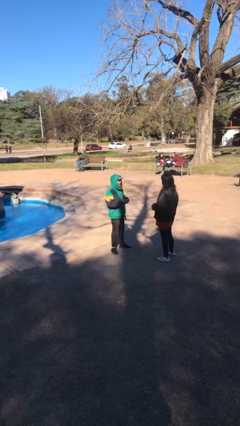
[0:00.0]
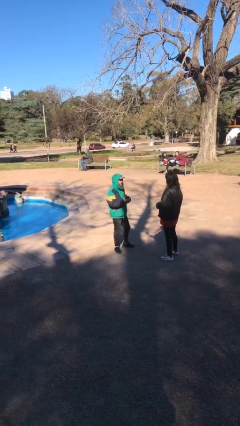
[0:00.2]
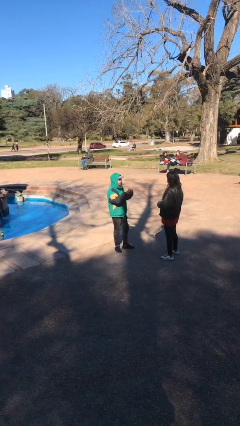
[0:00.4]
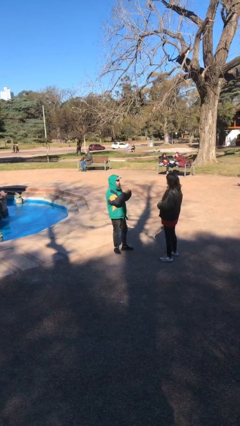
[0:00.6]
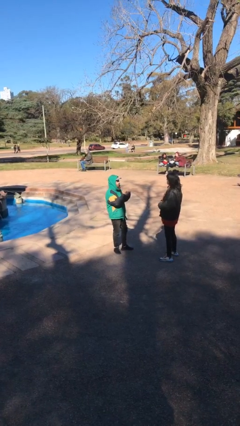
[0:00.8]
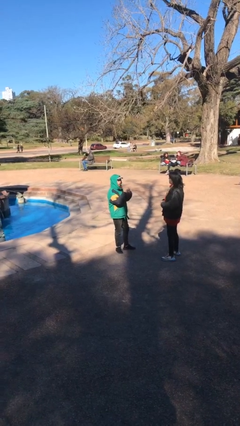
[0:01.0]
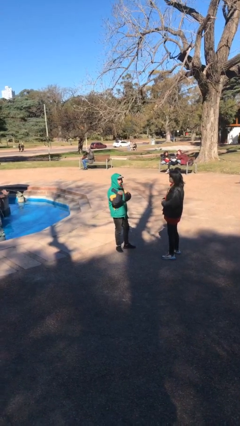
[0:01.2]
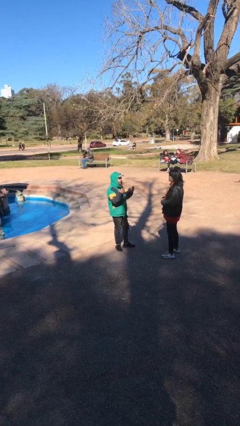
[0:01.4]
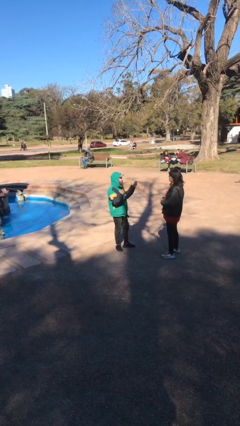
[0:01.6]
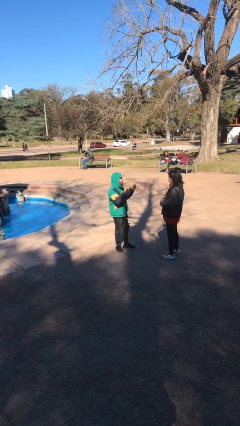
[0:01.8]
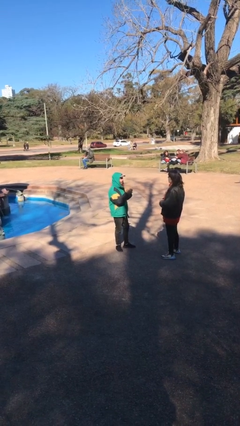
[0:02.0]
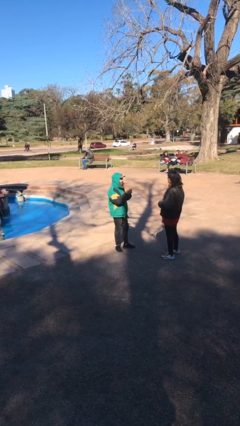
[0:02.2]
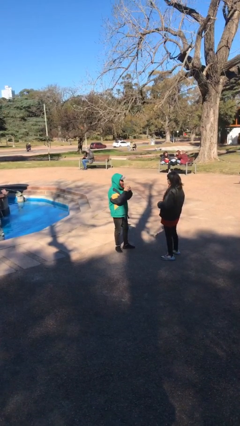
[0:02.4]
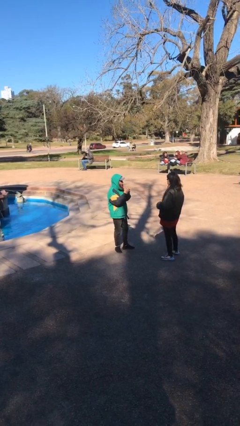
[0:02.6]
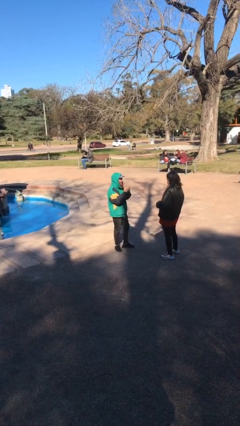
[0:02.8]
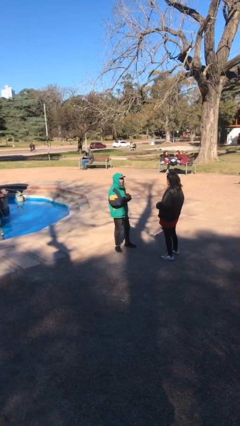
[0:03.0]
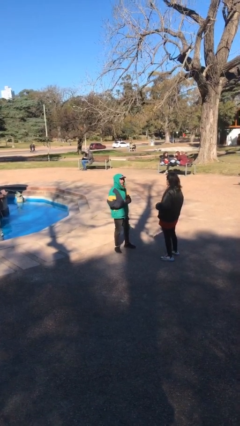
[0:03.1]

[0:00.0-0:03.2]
person talks to person

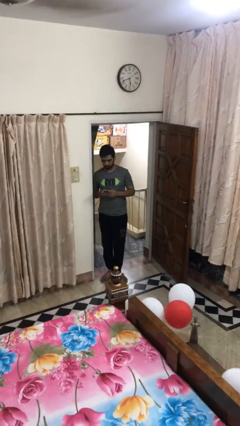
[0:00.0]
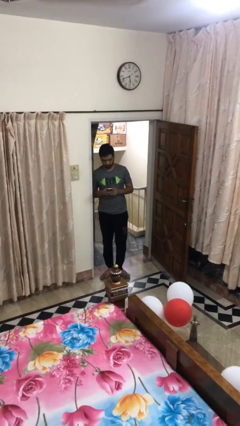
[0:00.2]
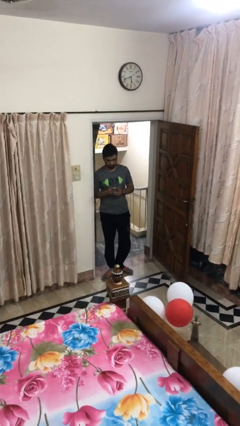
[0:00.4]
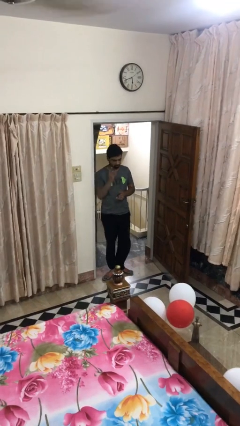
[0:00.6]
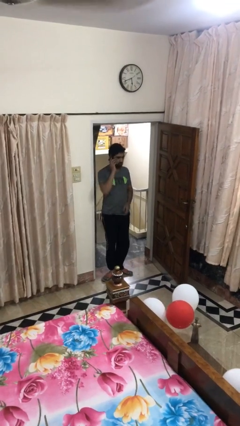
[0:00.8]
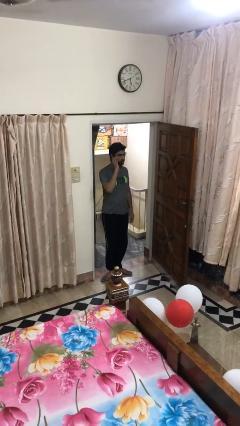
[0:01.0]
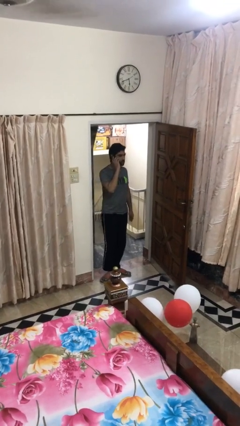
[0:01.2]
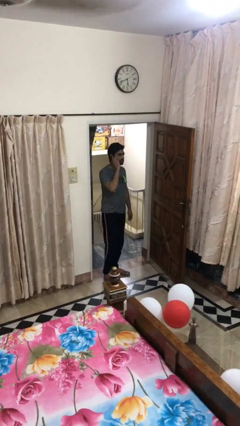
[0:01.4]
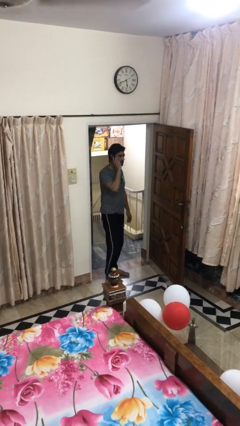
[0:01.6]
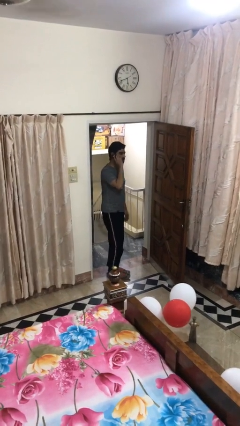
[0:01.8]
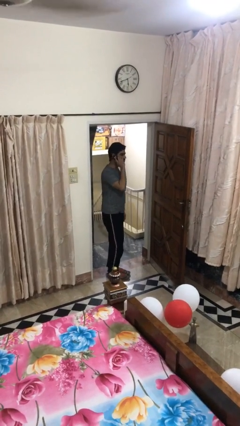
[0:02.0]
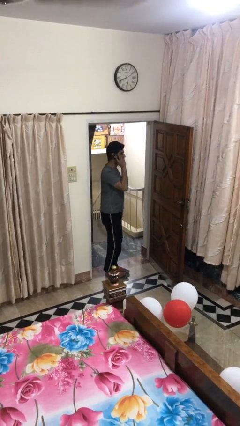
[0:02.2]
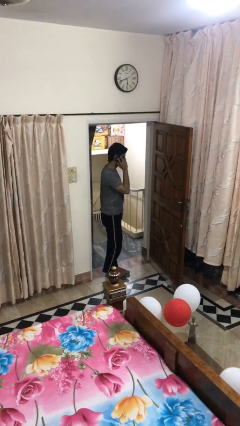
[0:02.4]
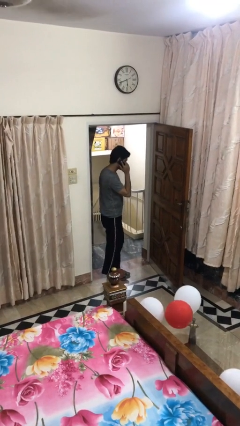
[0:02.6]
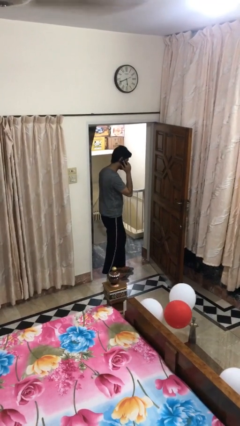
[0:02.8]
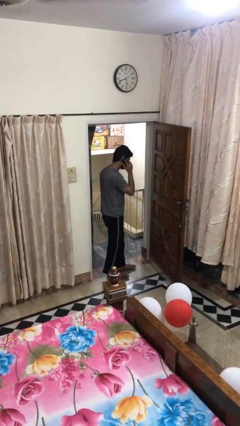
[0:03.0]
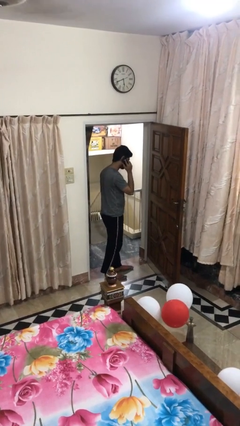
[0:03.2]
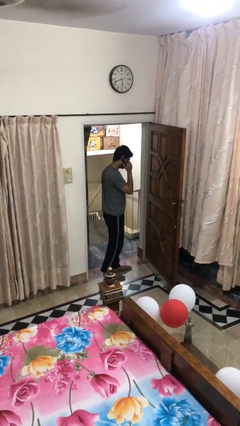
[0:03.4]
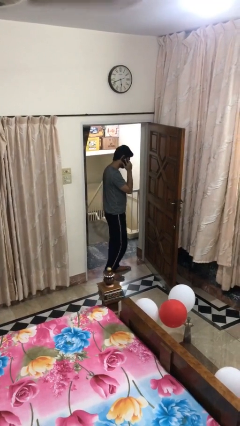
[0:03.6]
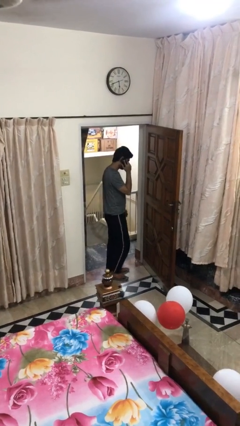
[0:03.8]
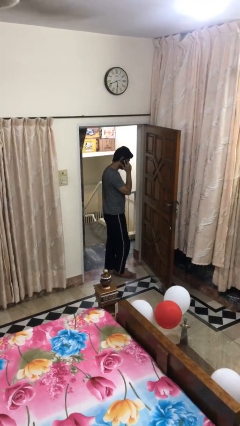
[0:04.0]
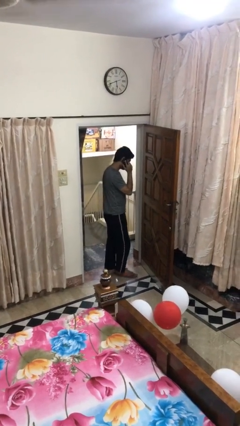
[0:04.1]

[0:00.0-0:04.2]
person talks on phone

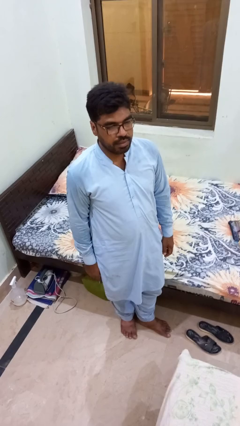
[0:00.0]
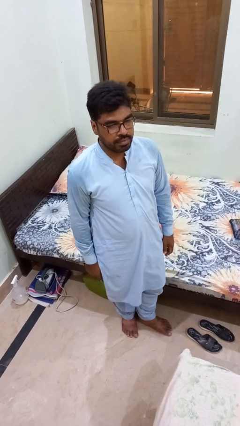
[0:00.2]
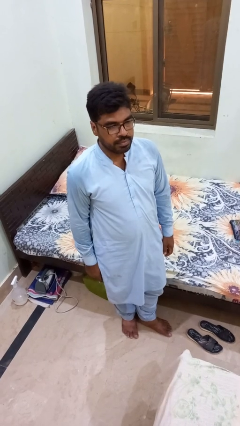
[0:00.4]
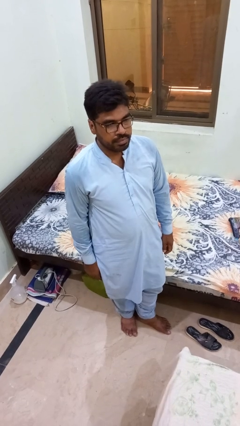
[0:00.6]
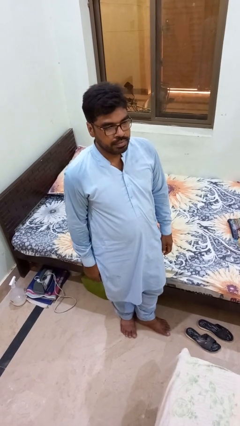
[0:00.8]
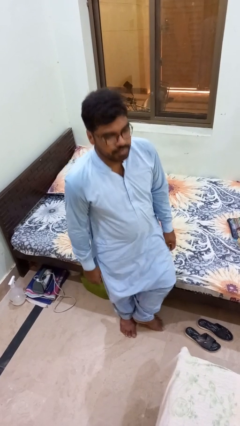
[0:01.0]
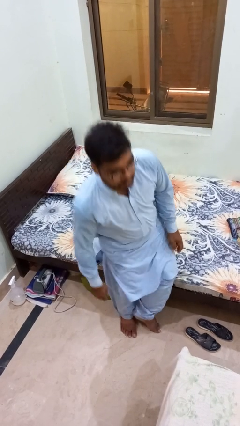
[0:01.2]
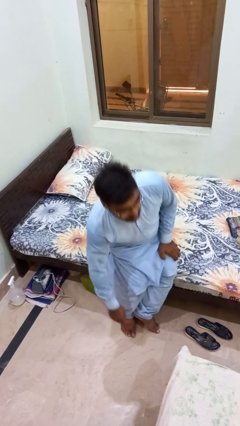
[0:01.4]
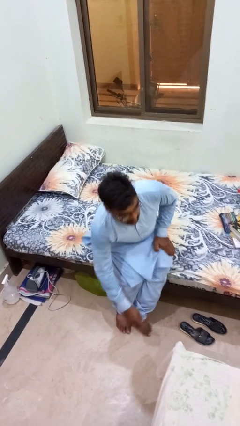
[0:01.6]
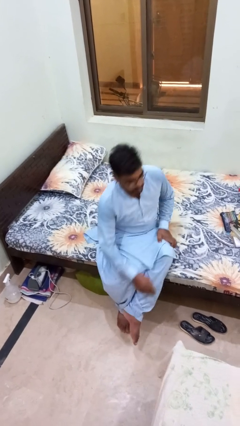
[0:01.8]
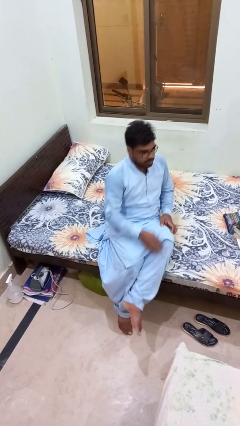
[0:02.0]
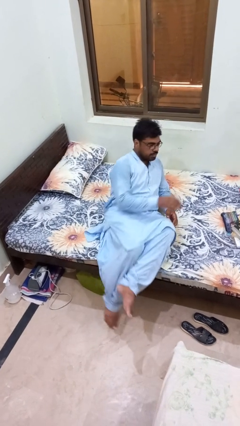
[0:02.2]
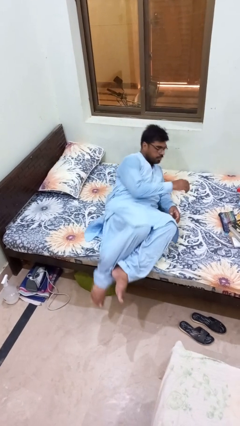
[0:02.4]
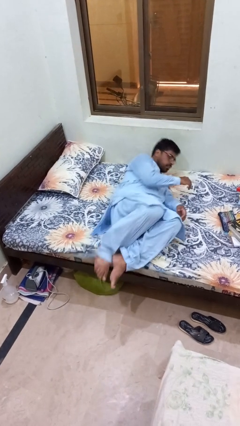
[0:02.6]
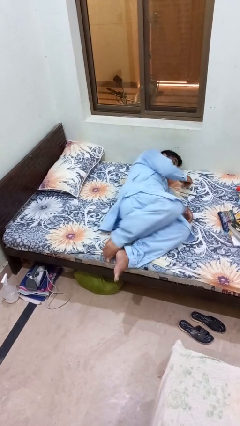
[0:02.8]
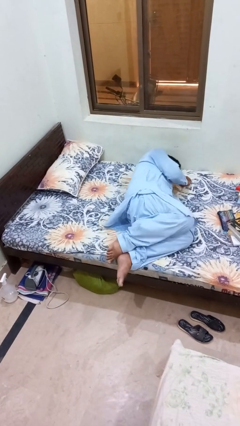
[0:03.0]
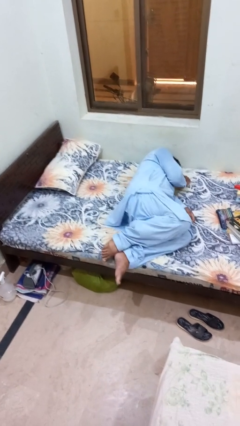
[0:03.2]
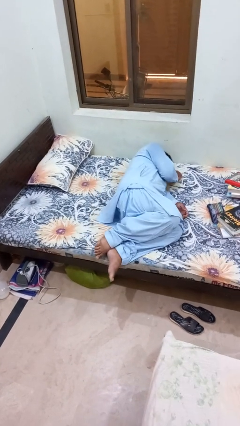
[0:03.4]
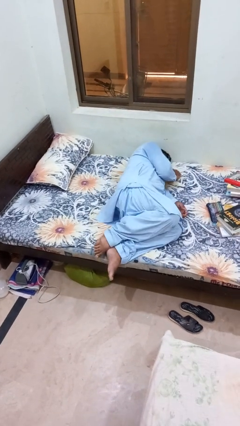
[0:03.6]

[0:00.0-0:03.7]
person lies down on bed

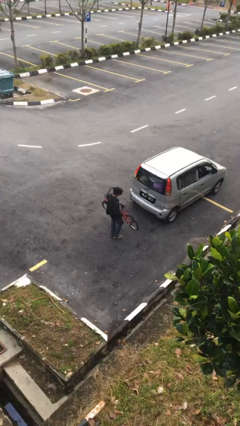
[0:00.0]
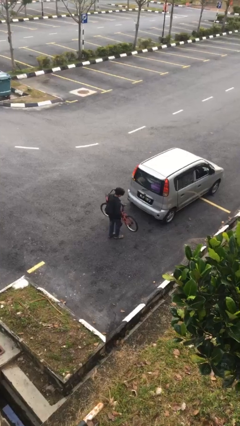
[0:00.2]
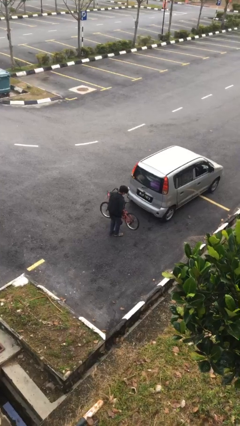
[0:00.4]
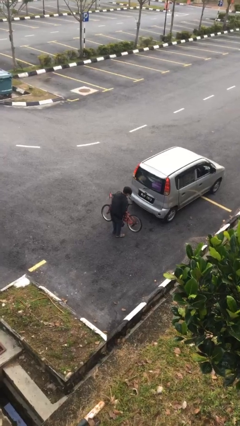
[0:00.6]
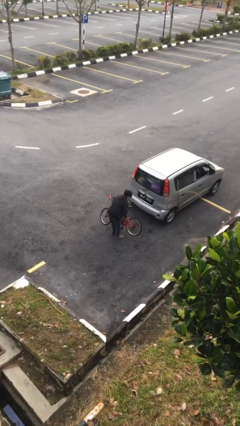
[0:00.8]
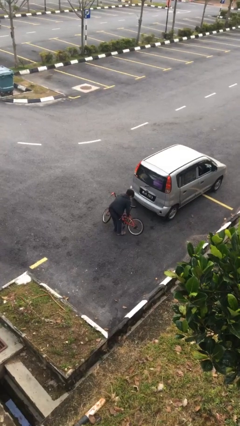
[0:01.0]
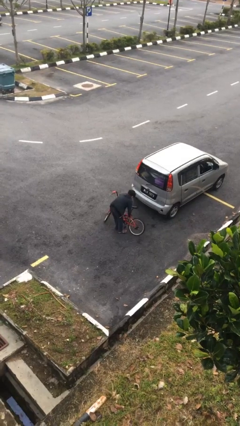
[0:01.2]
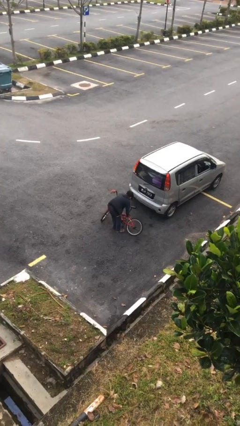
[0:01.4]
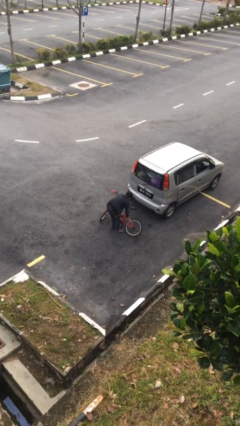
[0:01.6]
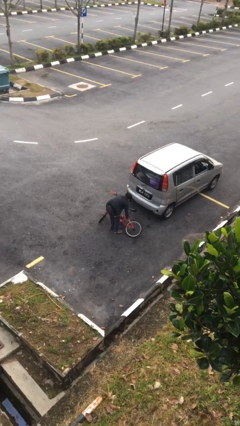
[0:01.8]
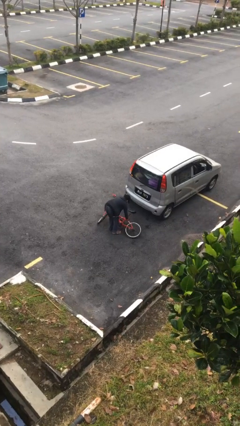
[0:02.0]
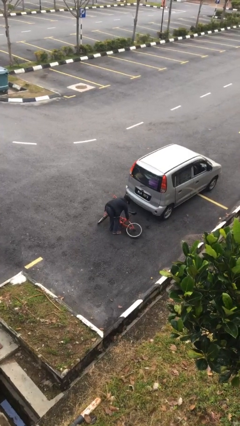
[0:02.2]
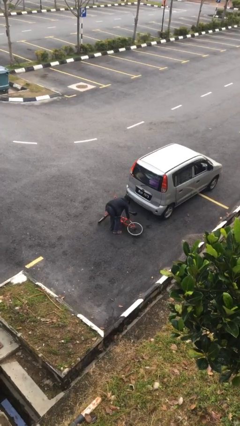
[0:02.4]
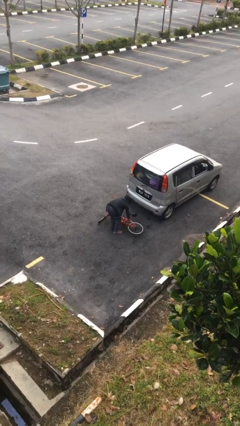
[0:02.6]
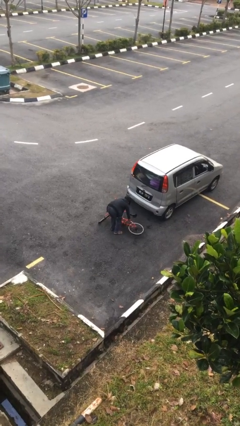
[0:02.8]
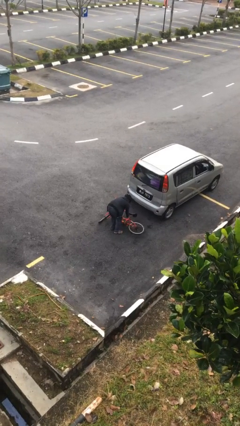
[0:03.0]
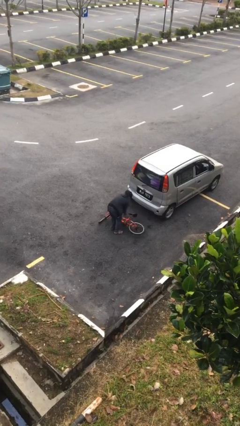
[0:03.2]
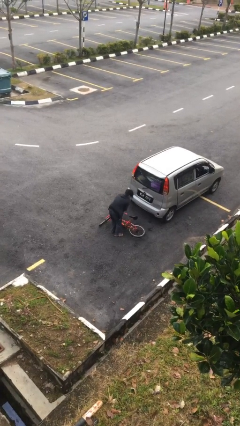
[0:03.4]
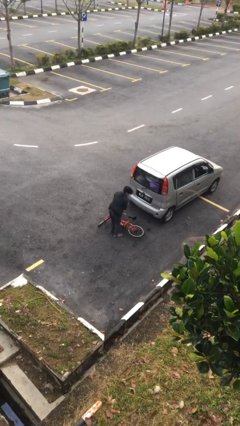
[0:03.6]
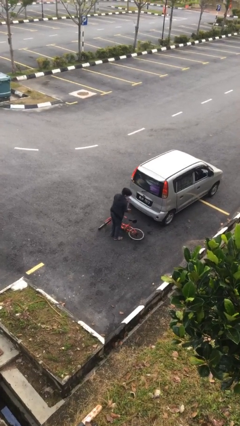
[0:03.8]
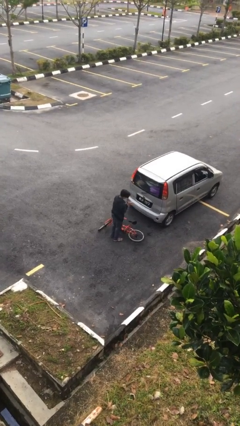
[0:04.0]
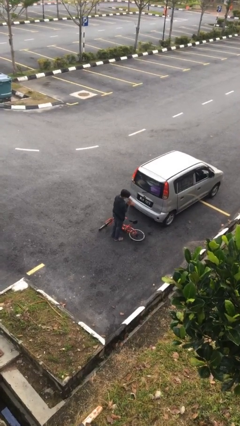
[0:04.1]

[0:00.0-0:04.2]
person puts down object on floor

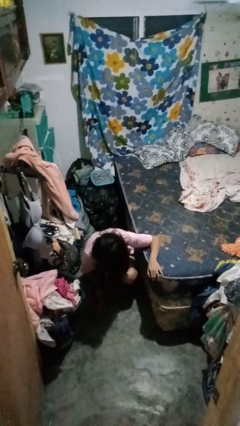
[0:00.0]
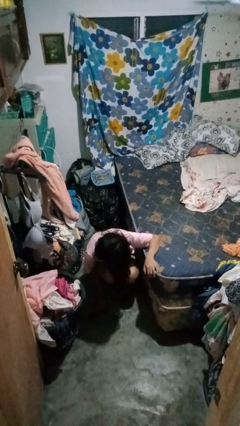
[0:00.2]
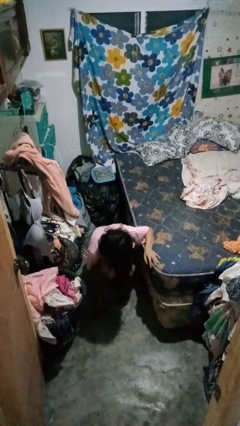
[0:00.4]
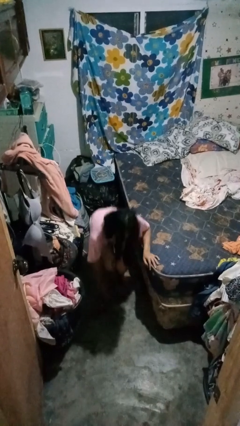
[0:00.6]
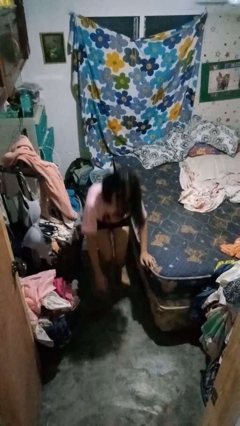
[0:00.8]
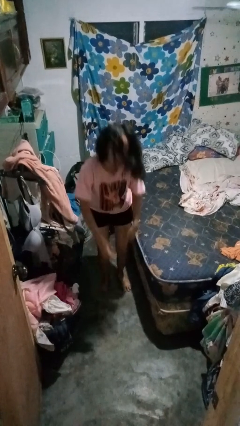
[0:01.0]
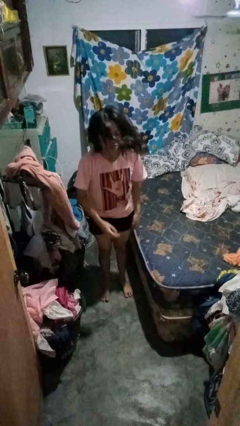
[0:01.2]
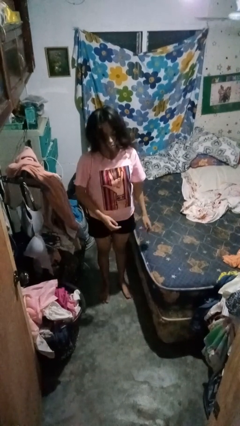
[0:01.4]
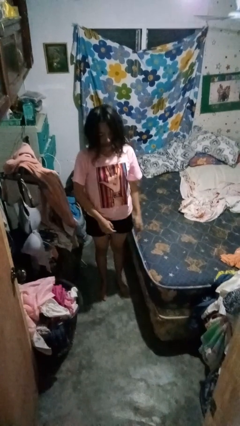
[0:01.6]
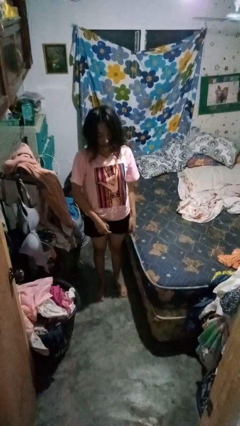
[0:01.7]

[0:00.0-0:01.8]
person stands up from floor
